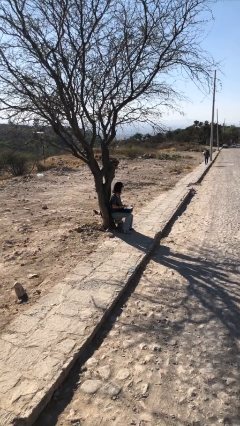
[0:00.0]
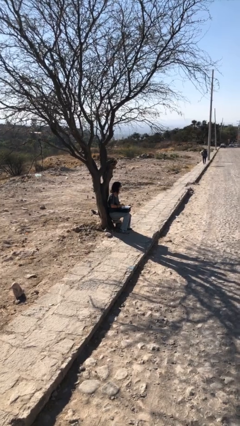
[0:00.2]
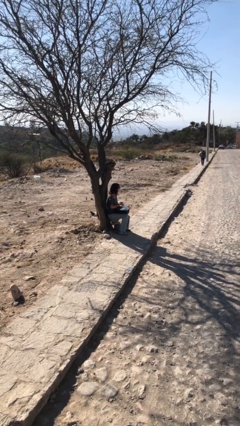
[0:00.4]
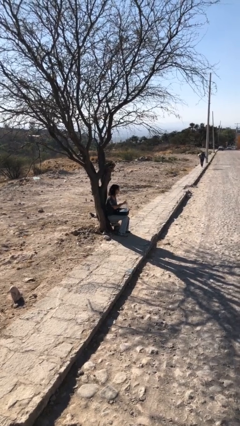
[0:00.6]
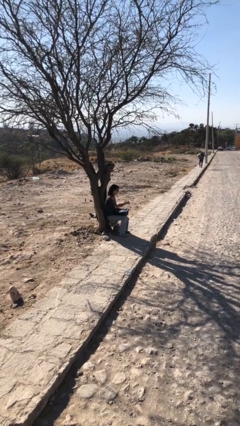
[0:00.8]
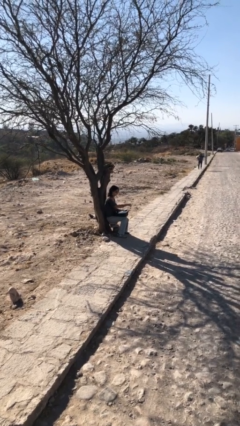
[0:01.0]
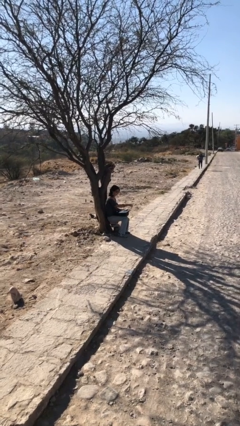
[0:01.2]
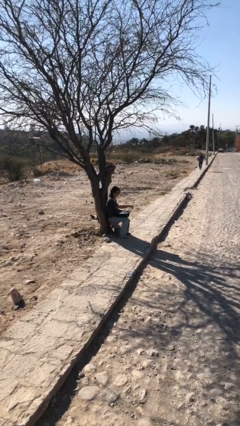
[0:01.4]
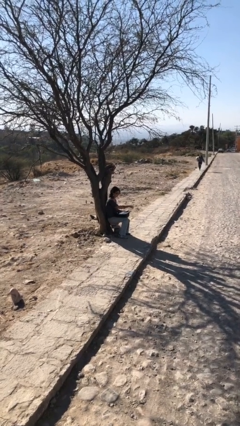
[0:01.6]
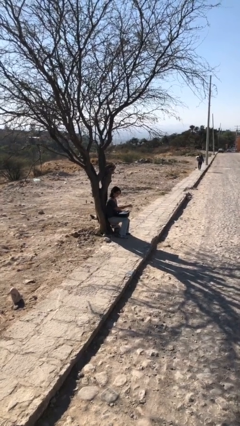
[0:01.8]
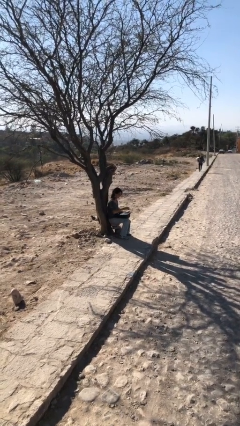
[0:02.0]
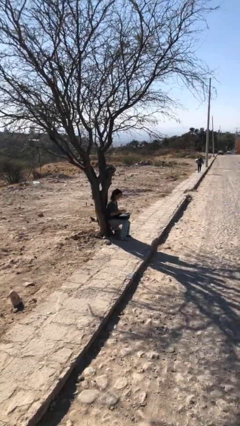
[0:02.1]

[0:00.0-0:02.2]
person interacts with laptop

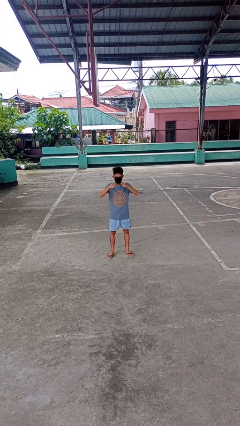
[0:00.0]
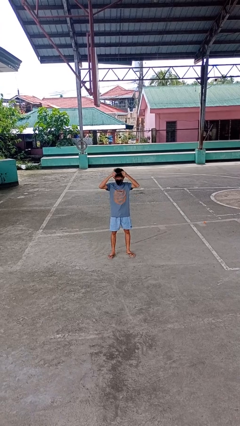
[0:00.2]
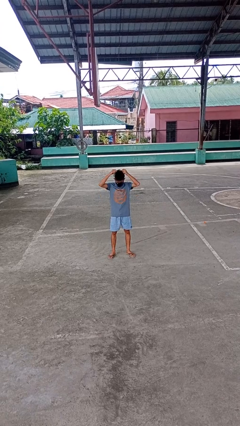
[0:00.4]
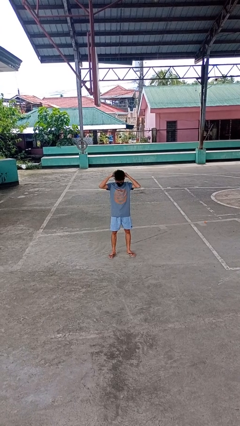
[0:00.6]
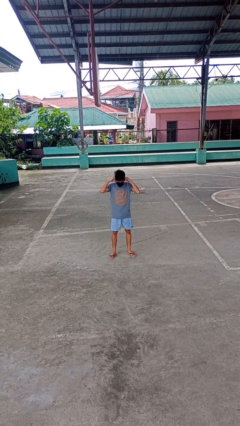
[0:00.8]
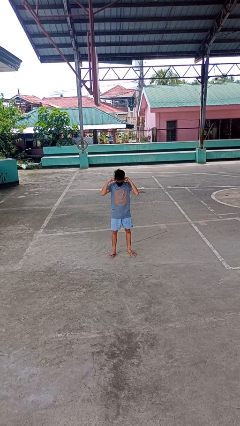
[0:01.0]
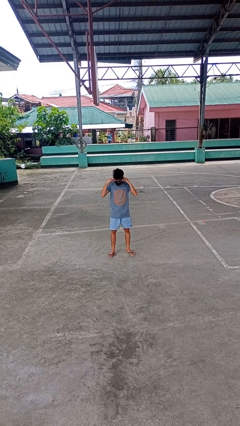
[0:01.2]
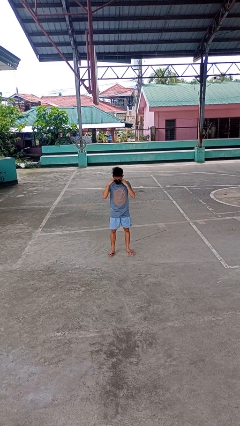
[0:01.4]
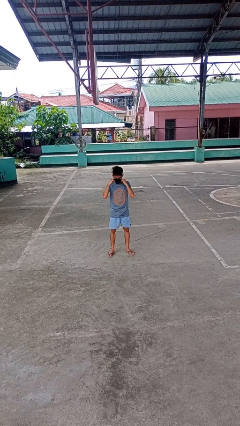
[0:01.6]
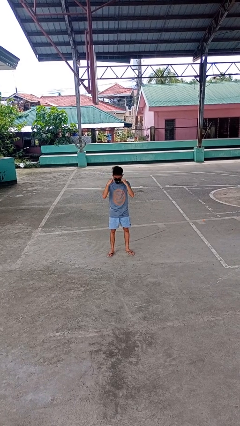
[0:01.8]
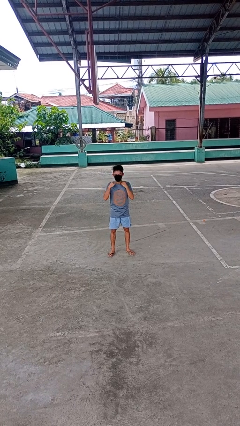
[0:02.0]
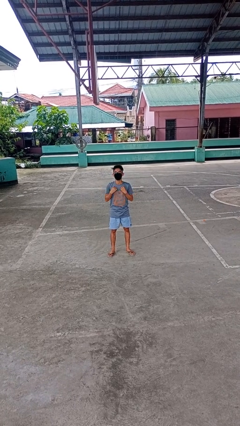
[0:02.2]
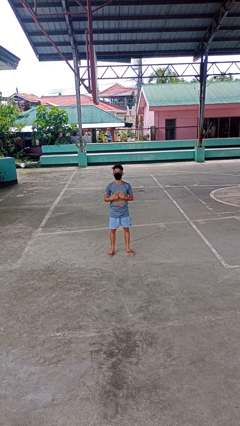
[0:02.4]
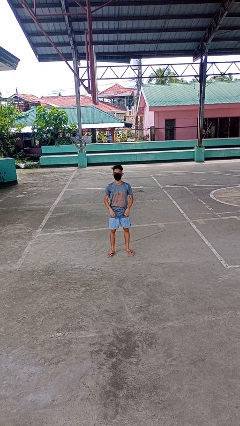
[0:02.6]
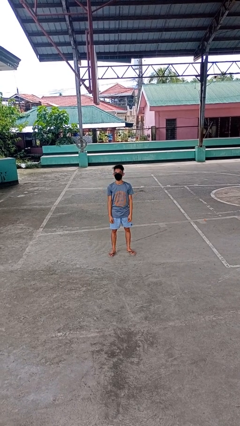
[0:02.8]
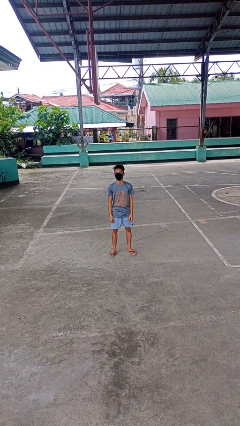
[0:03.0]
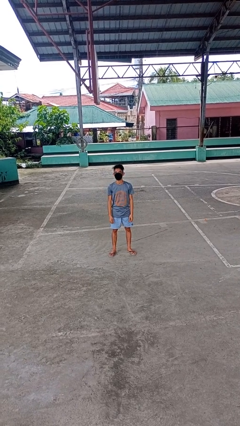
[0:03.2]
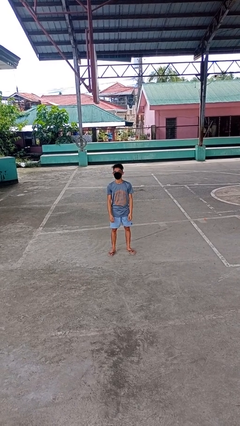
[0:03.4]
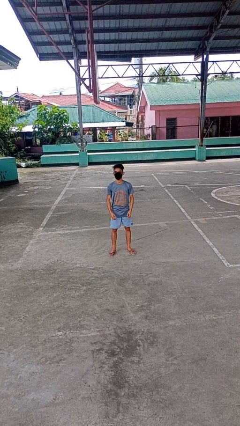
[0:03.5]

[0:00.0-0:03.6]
person puts on necklace

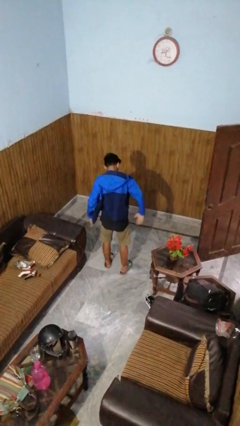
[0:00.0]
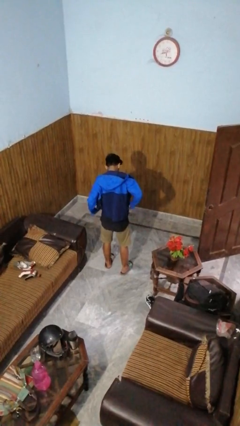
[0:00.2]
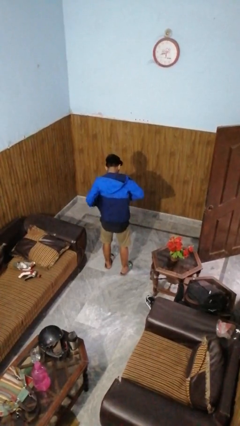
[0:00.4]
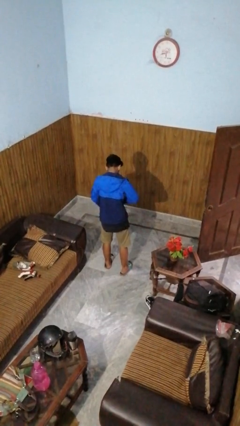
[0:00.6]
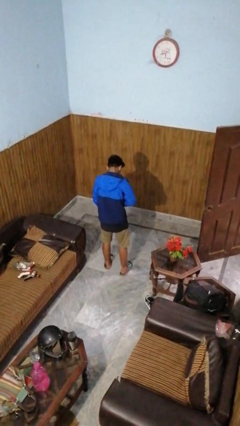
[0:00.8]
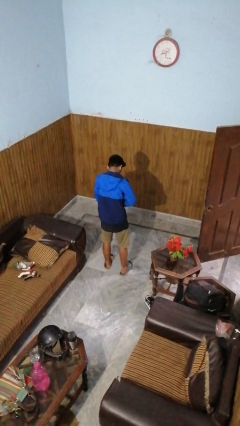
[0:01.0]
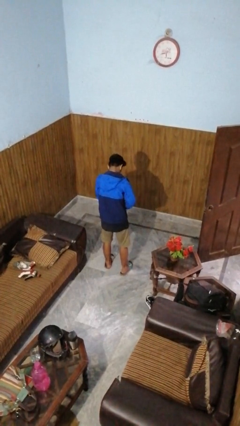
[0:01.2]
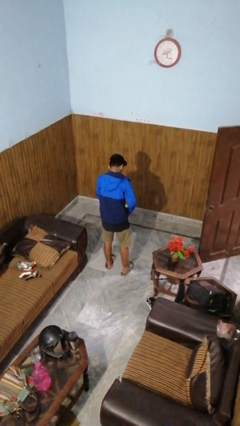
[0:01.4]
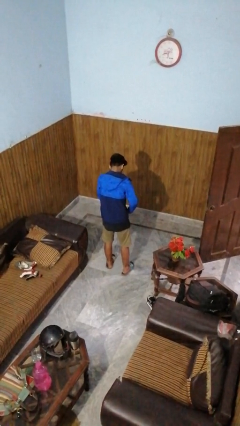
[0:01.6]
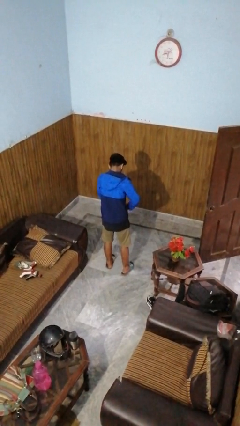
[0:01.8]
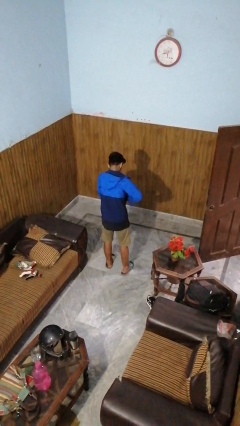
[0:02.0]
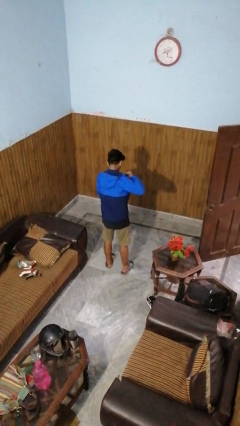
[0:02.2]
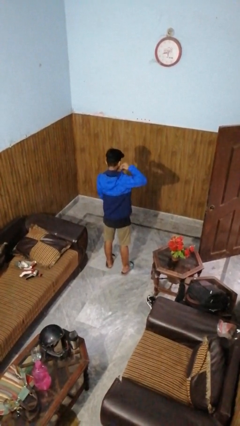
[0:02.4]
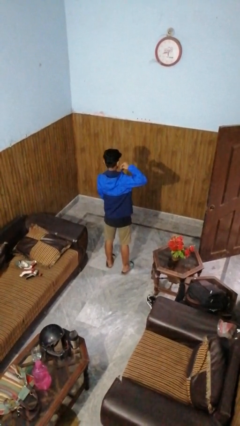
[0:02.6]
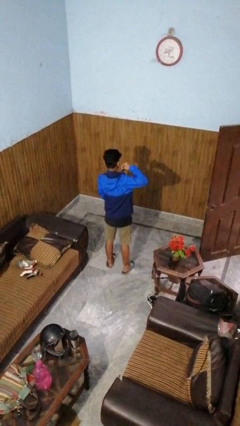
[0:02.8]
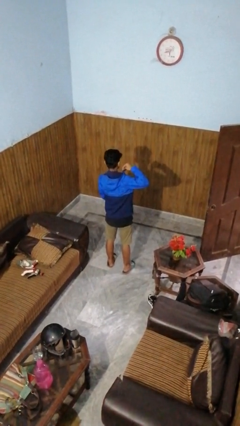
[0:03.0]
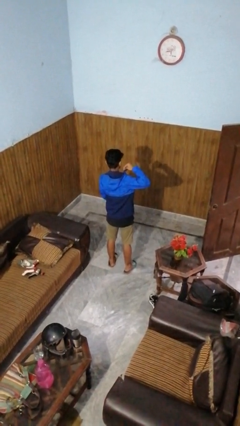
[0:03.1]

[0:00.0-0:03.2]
person zips up jacket

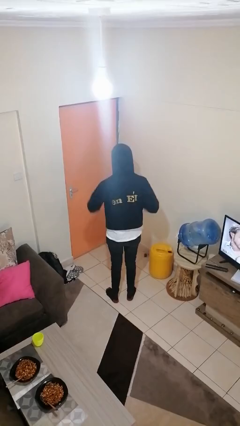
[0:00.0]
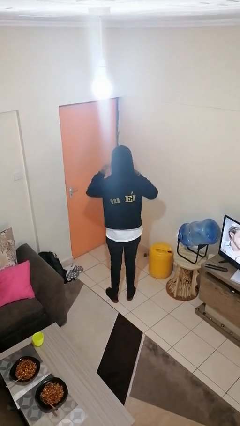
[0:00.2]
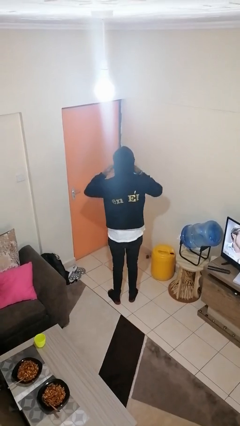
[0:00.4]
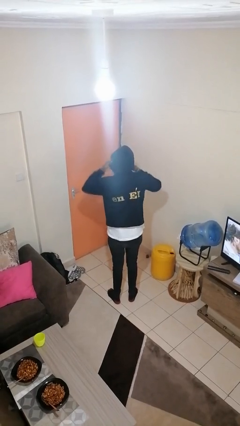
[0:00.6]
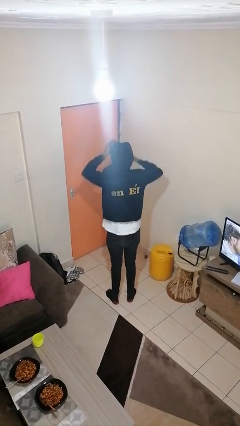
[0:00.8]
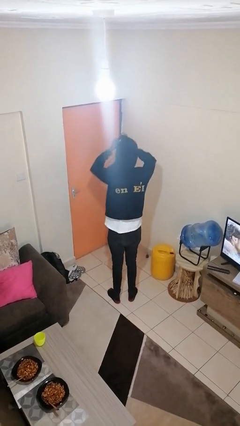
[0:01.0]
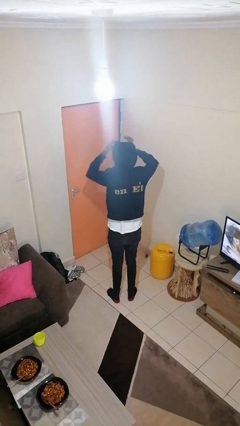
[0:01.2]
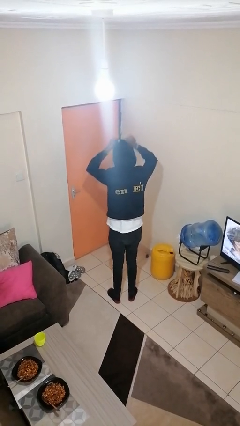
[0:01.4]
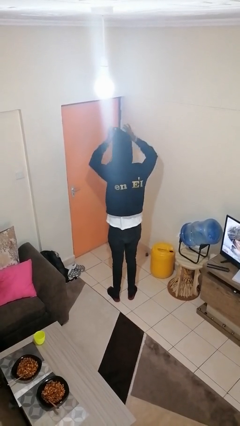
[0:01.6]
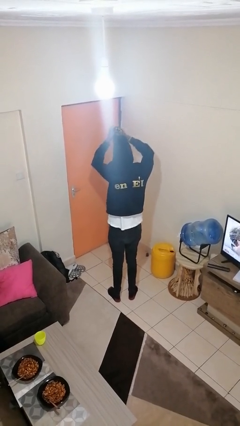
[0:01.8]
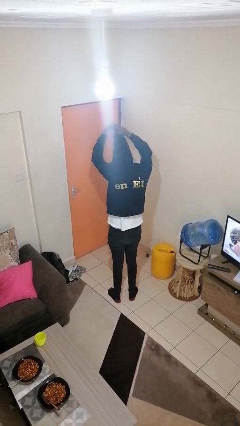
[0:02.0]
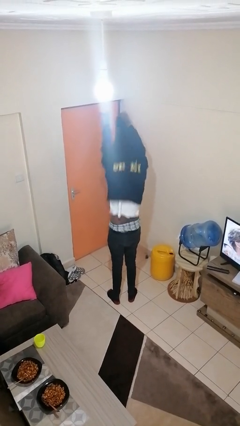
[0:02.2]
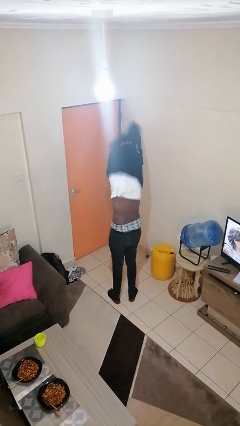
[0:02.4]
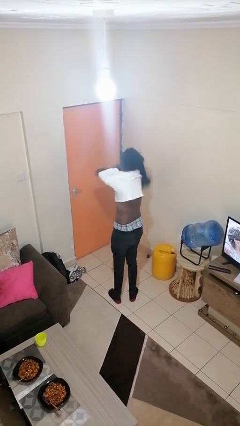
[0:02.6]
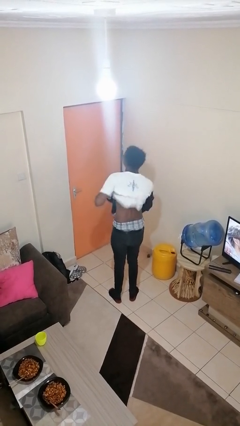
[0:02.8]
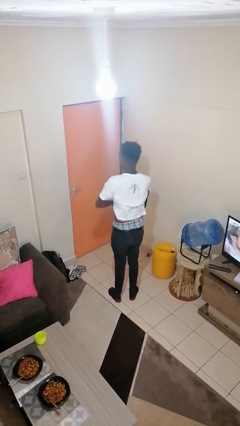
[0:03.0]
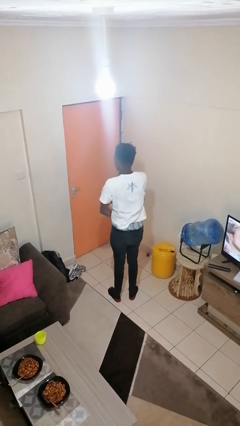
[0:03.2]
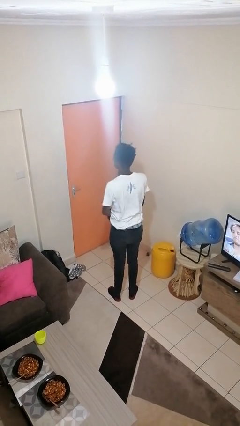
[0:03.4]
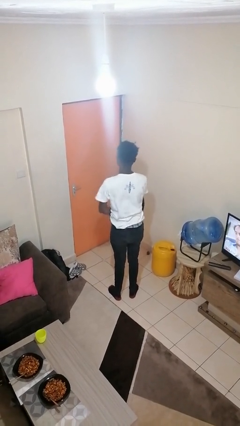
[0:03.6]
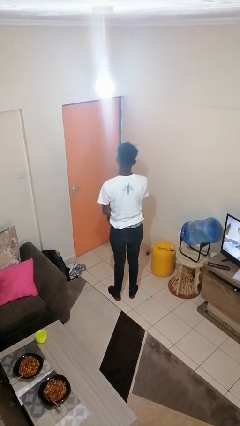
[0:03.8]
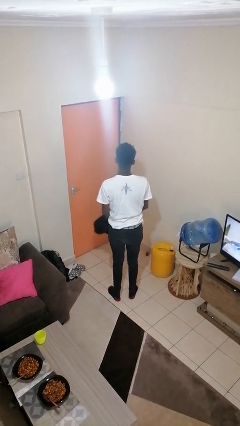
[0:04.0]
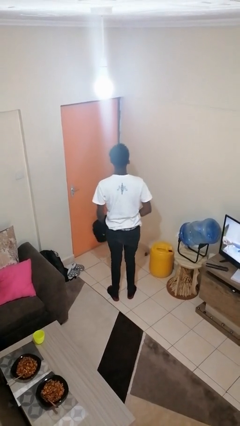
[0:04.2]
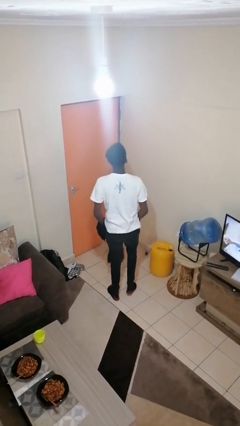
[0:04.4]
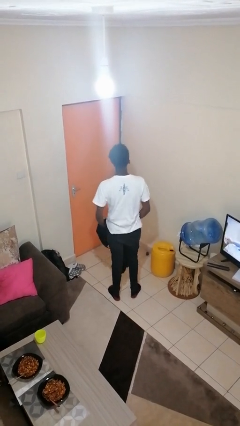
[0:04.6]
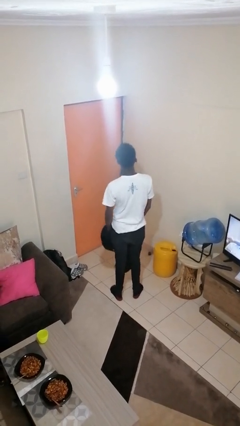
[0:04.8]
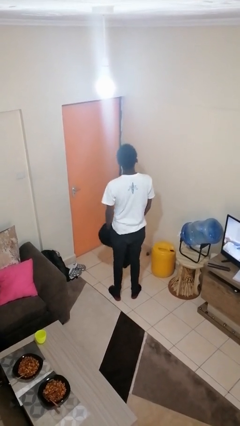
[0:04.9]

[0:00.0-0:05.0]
person takes off hoodie

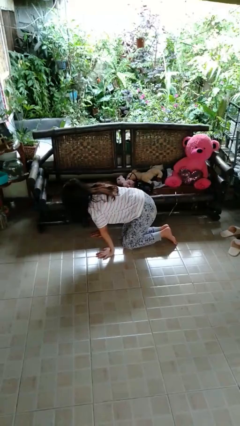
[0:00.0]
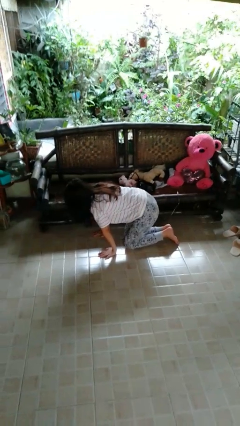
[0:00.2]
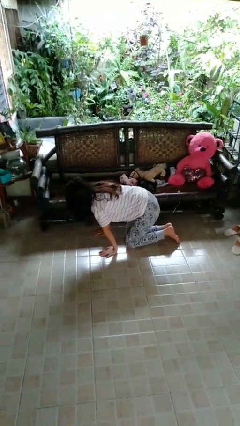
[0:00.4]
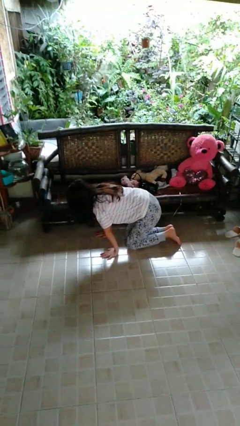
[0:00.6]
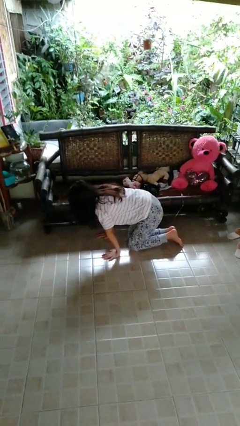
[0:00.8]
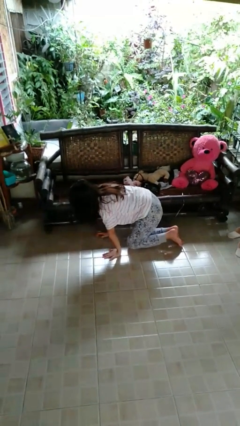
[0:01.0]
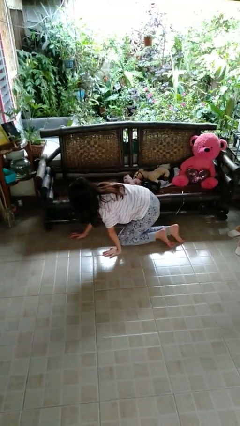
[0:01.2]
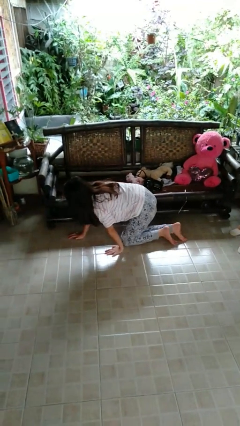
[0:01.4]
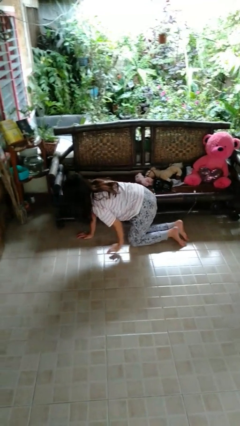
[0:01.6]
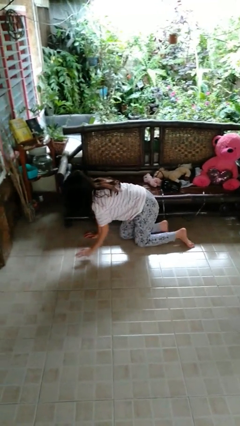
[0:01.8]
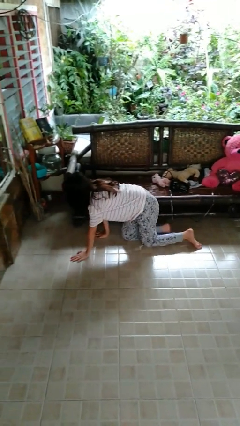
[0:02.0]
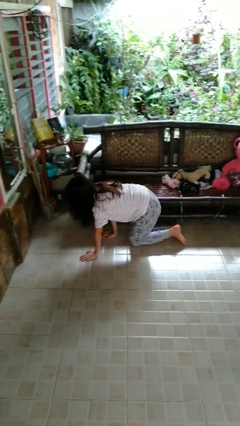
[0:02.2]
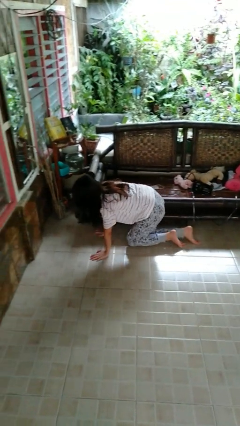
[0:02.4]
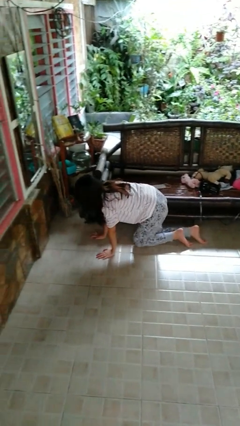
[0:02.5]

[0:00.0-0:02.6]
person crawls

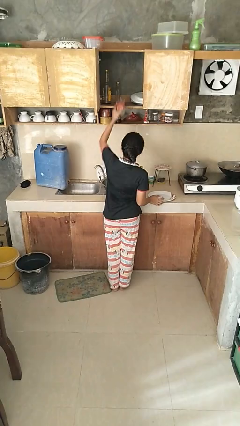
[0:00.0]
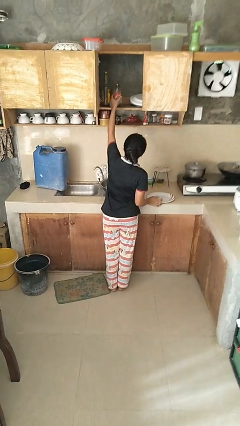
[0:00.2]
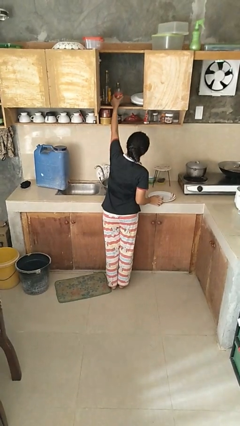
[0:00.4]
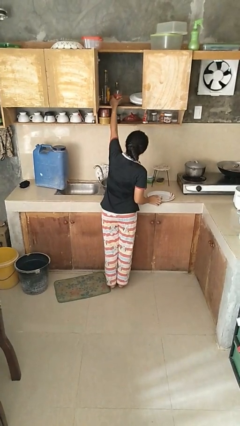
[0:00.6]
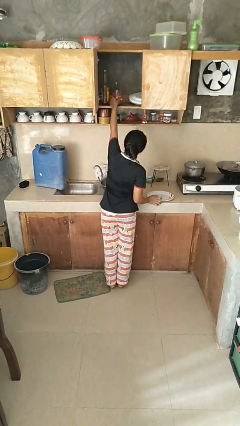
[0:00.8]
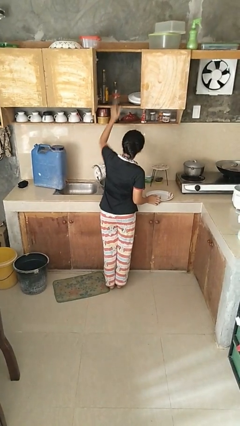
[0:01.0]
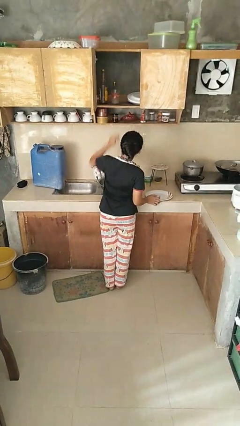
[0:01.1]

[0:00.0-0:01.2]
person puts object in cabinet
